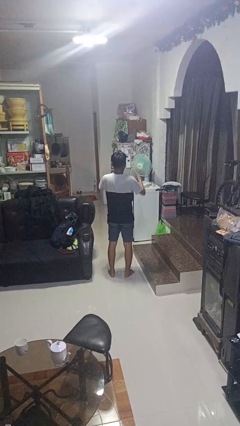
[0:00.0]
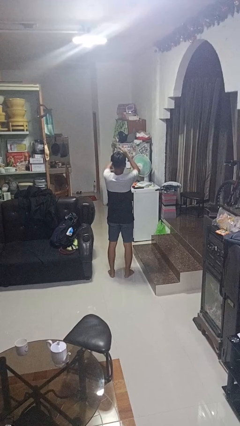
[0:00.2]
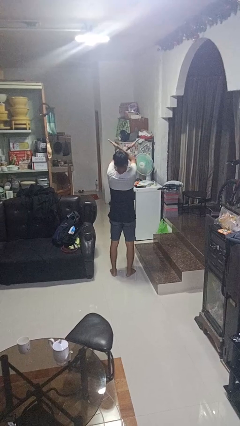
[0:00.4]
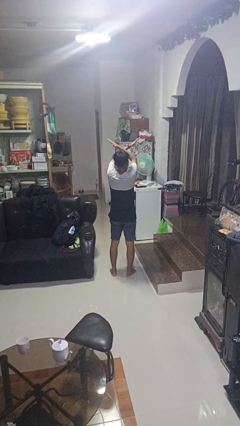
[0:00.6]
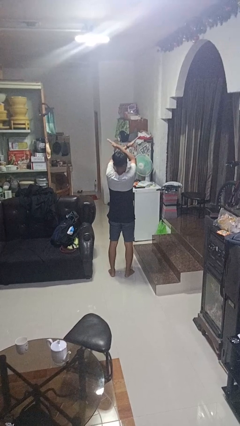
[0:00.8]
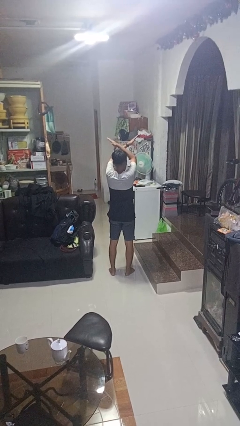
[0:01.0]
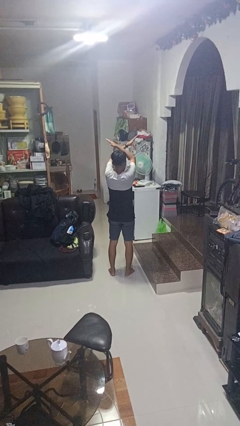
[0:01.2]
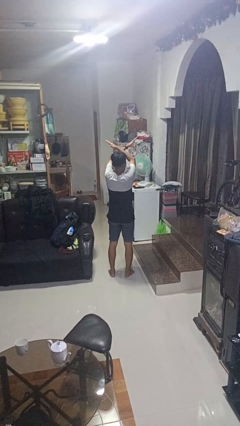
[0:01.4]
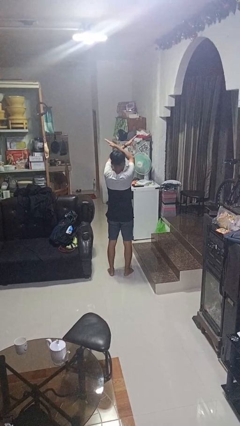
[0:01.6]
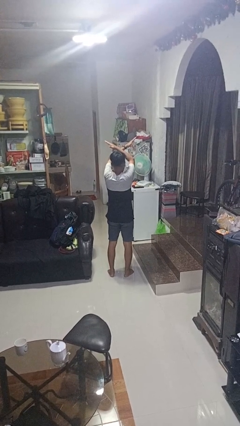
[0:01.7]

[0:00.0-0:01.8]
person gestures arms x

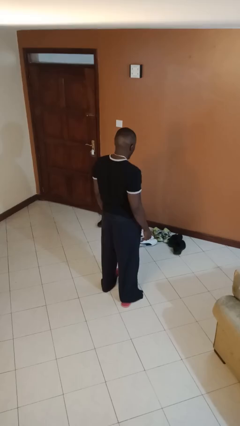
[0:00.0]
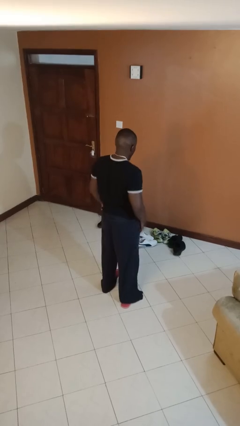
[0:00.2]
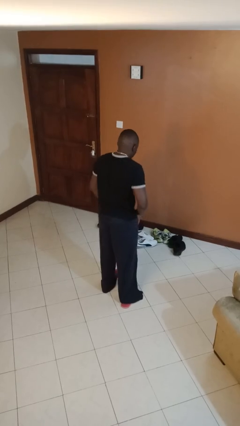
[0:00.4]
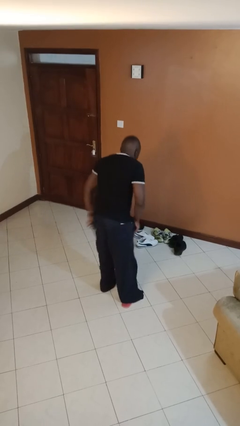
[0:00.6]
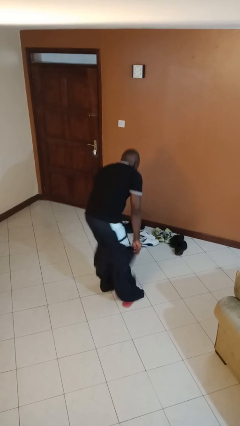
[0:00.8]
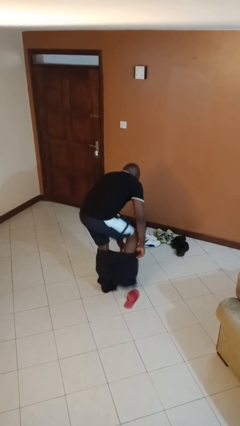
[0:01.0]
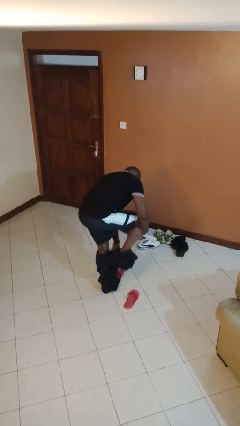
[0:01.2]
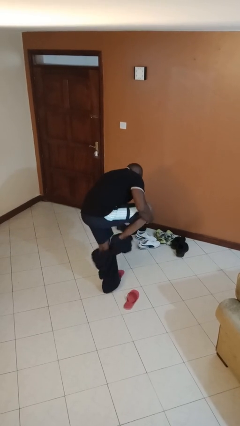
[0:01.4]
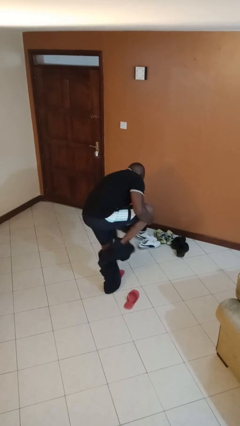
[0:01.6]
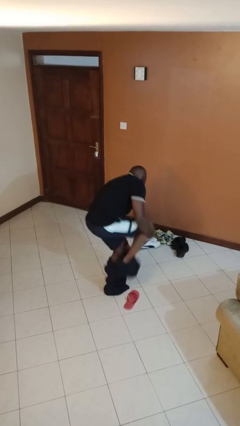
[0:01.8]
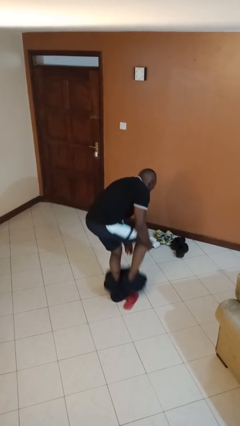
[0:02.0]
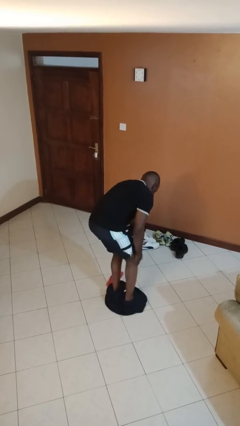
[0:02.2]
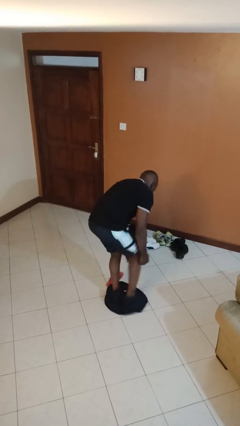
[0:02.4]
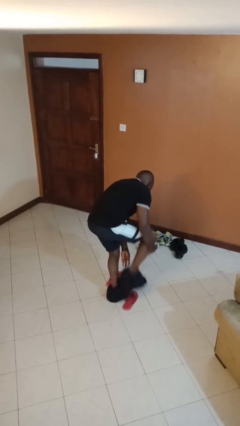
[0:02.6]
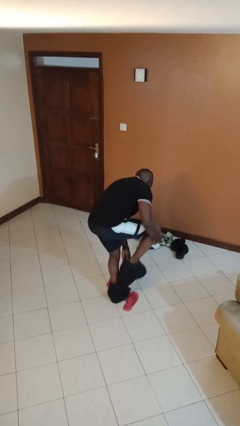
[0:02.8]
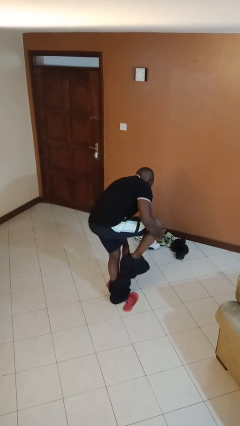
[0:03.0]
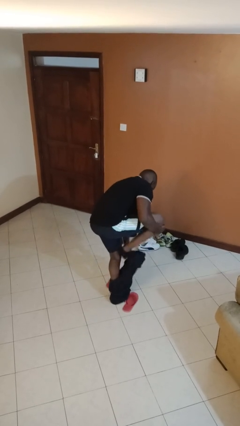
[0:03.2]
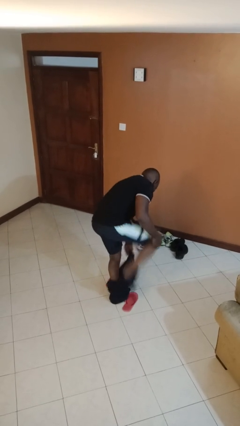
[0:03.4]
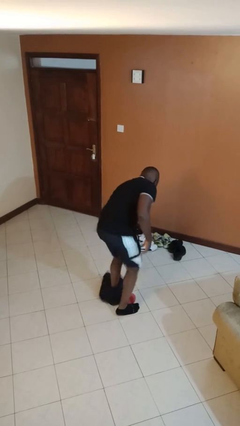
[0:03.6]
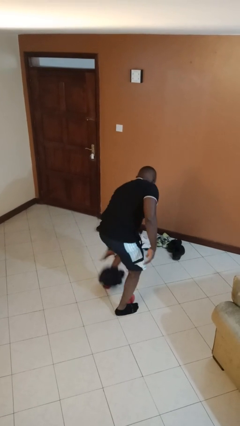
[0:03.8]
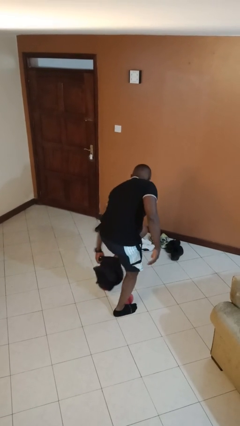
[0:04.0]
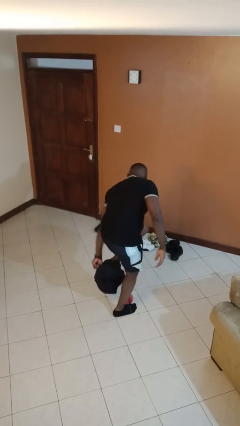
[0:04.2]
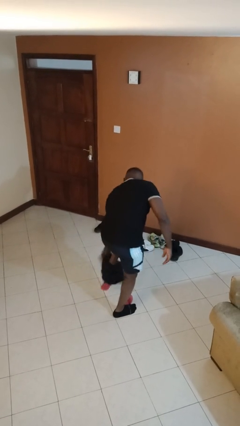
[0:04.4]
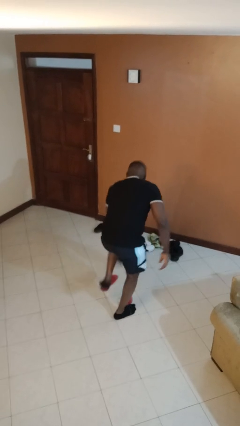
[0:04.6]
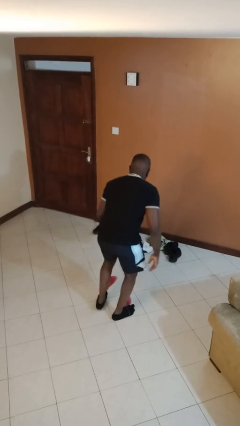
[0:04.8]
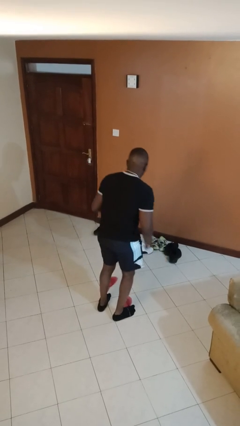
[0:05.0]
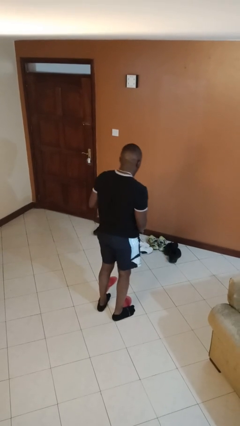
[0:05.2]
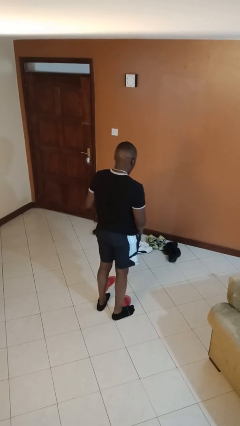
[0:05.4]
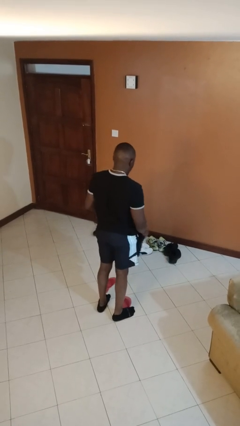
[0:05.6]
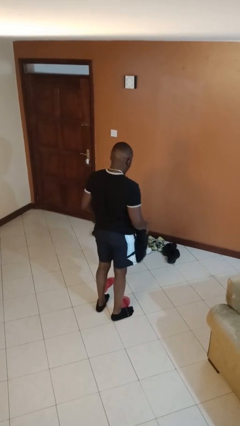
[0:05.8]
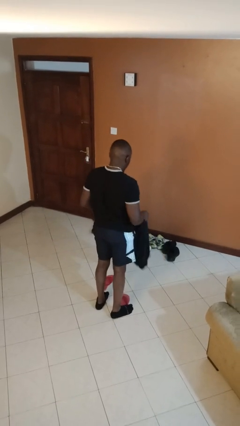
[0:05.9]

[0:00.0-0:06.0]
person takes off pants

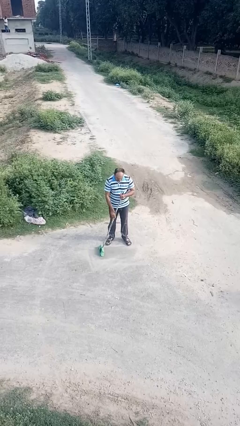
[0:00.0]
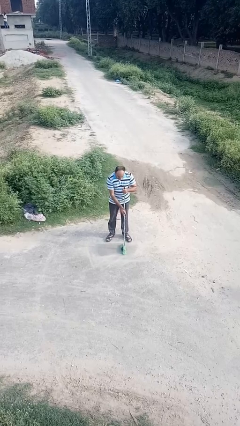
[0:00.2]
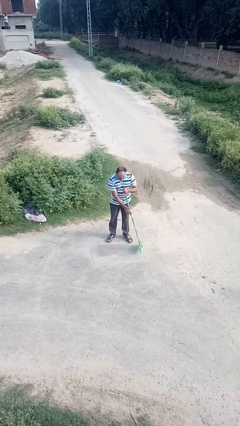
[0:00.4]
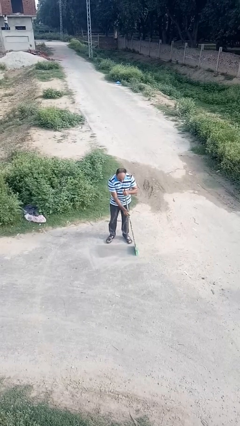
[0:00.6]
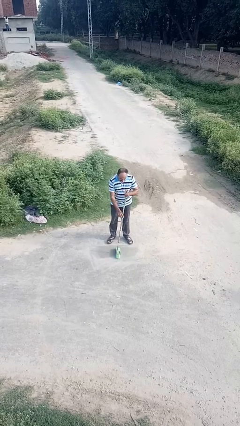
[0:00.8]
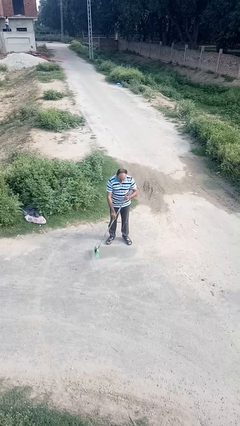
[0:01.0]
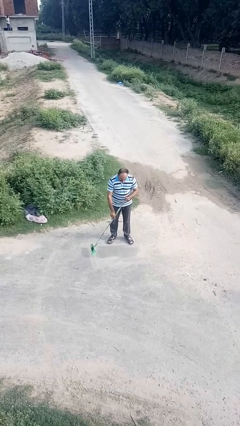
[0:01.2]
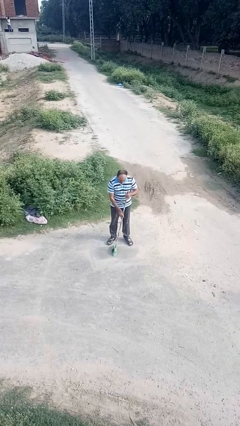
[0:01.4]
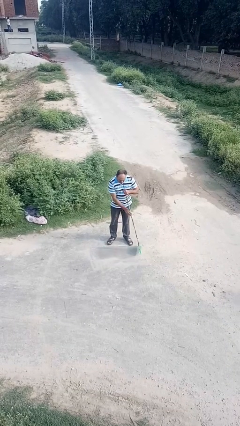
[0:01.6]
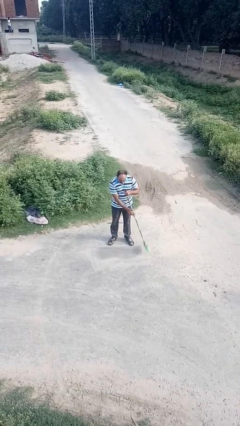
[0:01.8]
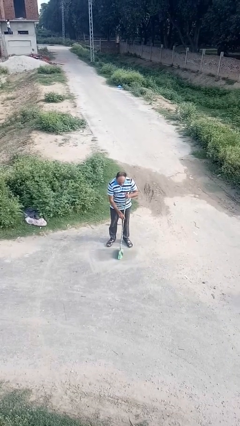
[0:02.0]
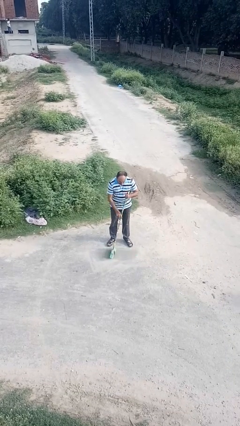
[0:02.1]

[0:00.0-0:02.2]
person sweeps floor

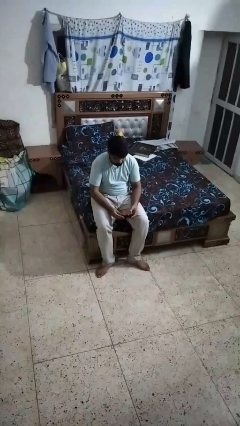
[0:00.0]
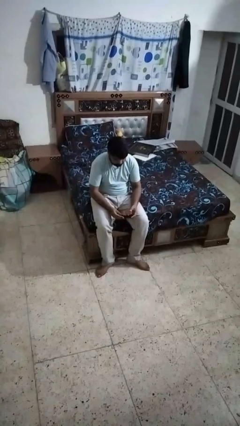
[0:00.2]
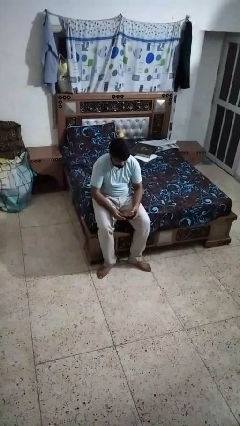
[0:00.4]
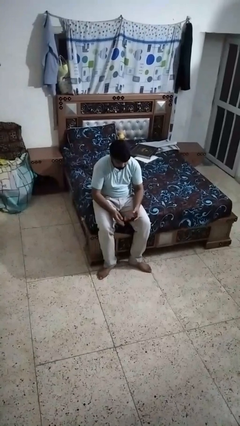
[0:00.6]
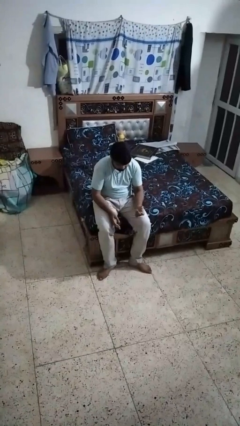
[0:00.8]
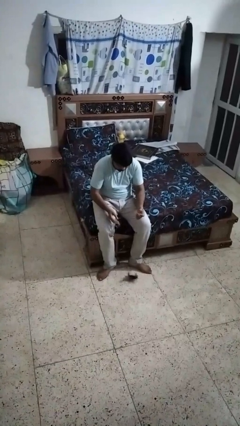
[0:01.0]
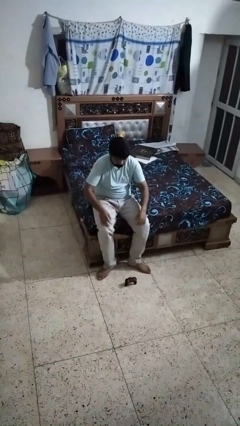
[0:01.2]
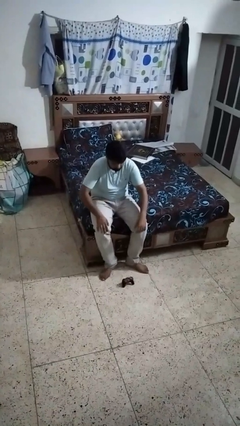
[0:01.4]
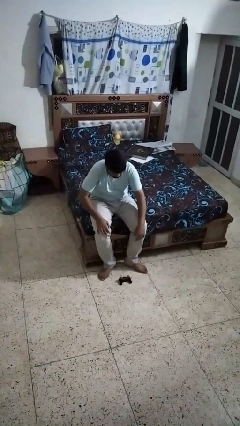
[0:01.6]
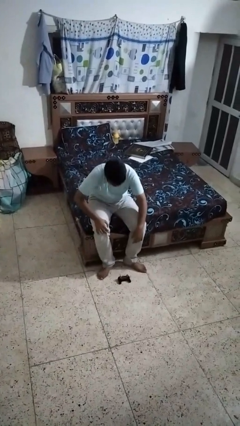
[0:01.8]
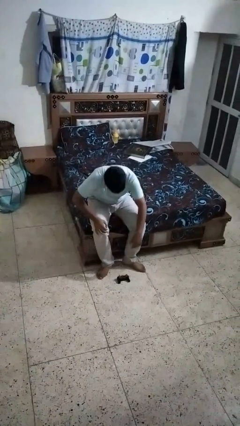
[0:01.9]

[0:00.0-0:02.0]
person drops object

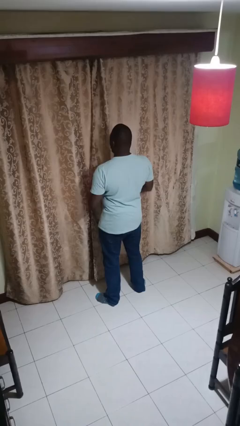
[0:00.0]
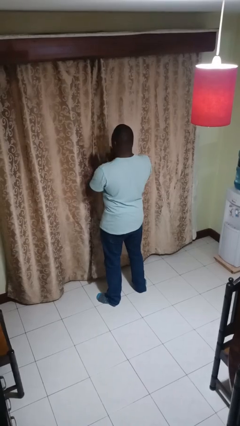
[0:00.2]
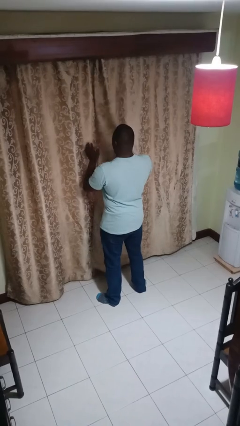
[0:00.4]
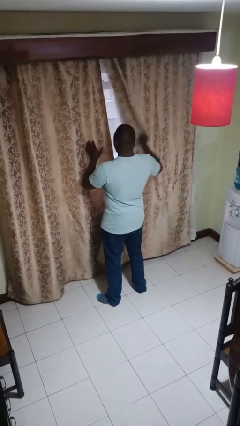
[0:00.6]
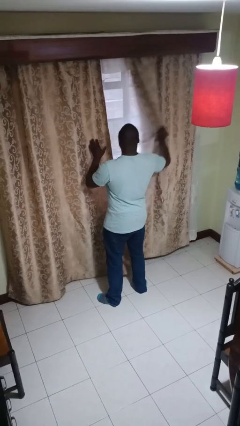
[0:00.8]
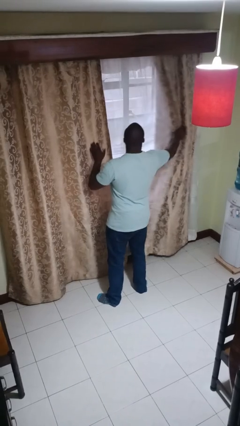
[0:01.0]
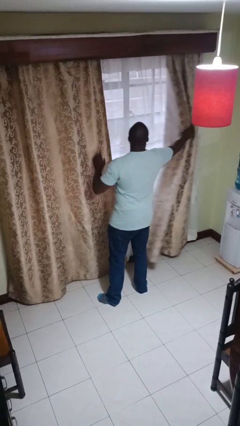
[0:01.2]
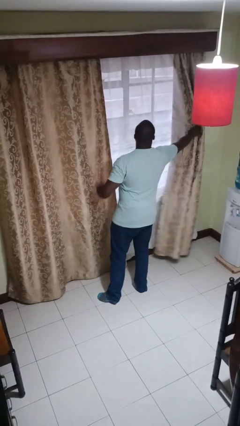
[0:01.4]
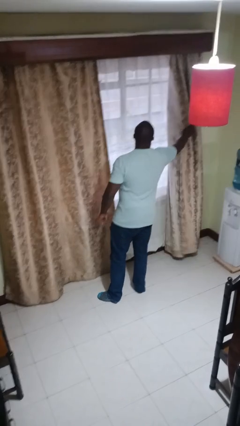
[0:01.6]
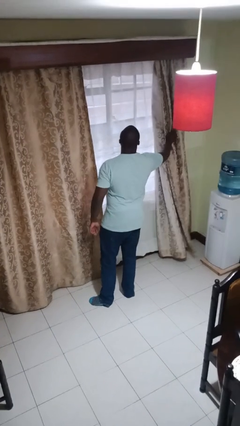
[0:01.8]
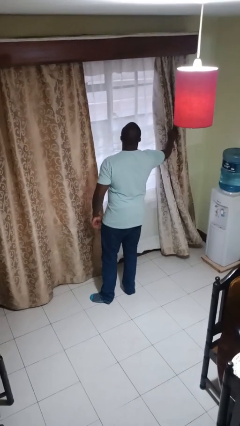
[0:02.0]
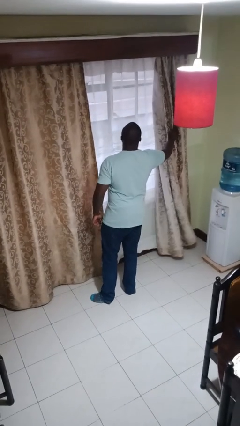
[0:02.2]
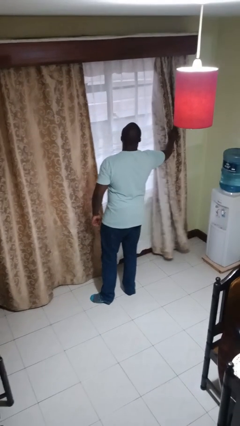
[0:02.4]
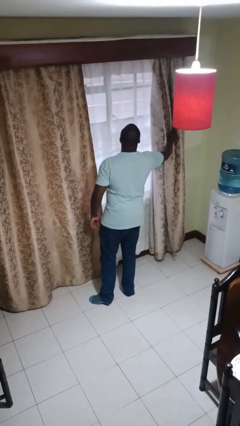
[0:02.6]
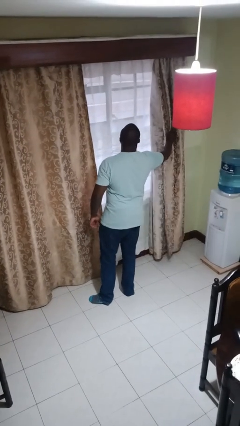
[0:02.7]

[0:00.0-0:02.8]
person opens curtains

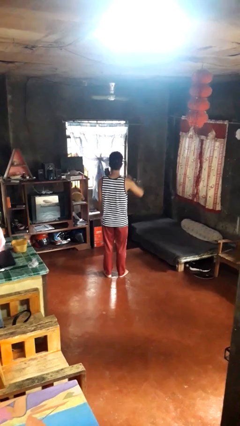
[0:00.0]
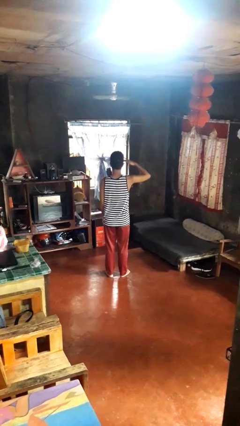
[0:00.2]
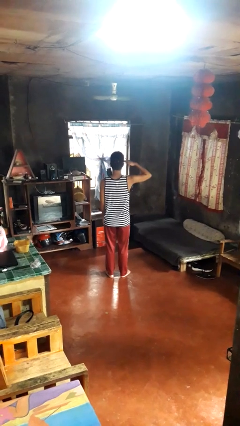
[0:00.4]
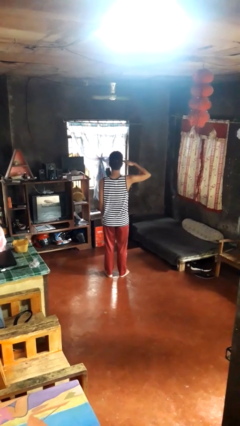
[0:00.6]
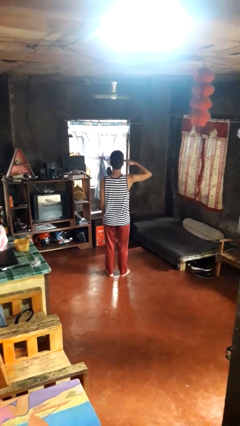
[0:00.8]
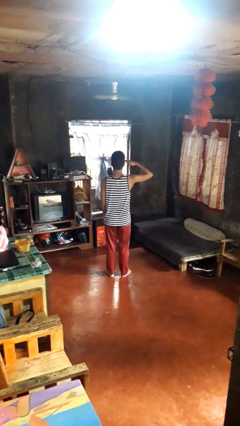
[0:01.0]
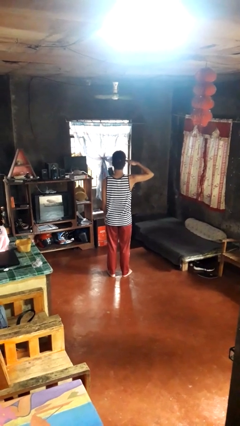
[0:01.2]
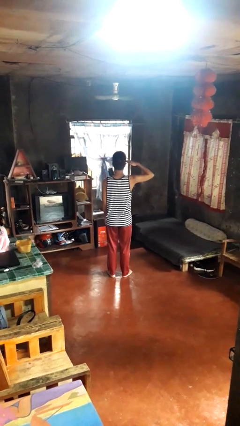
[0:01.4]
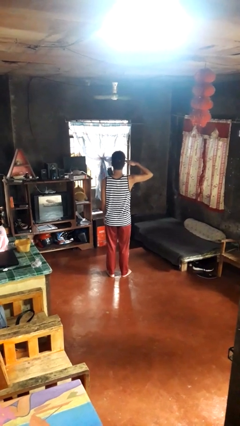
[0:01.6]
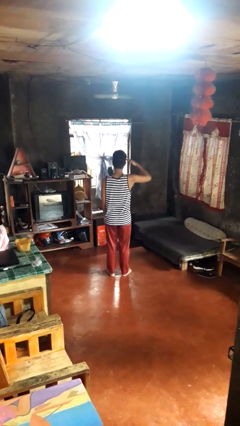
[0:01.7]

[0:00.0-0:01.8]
person salutes

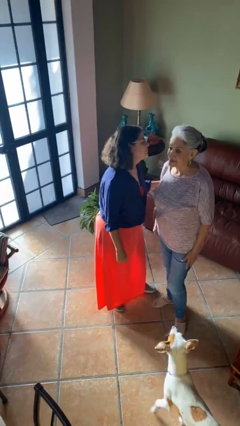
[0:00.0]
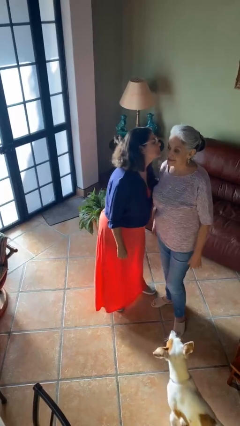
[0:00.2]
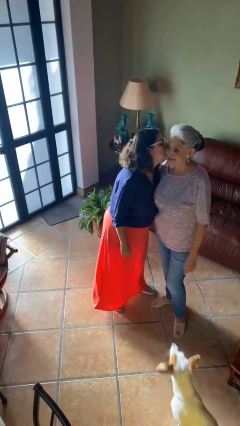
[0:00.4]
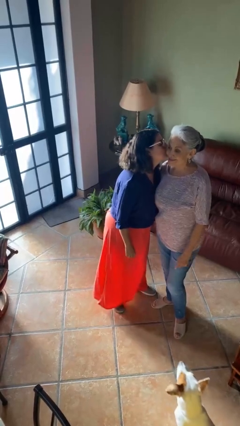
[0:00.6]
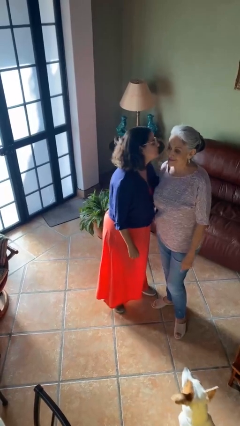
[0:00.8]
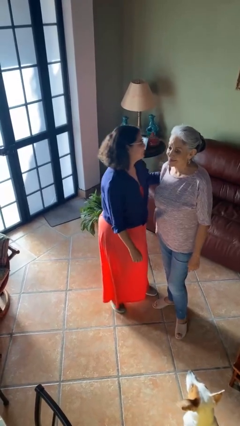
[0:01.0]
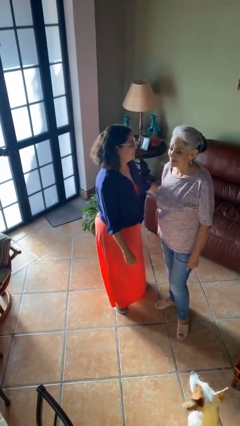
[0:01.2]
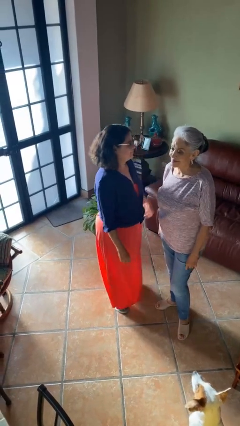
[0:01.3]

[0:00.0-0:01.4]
person kisses cheek of person
